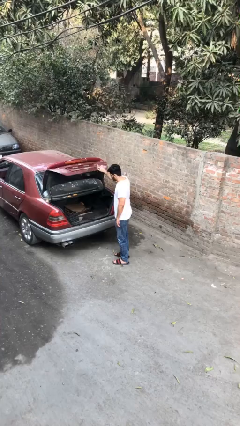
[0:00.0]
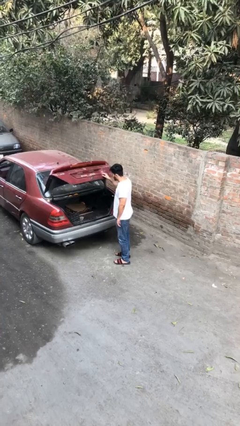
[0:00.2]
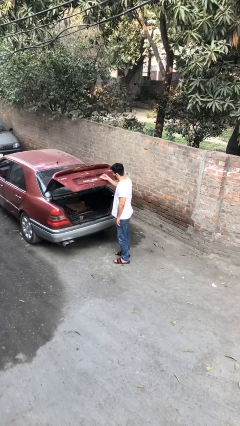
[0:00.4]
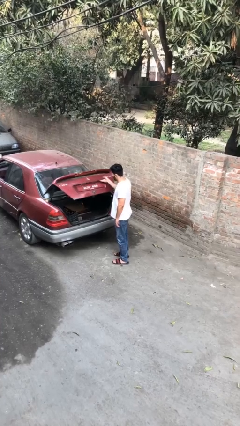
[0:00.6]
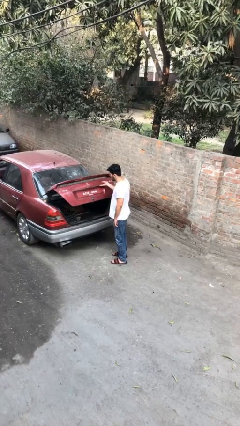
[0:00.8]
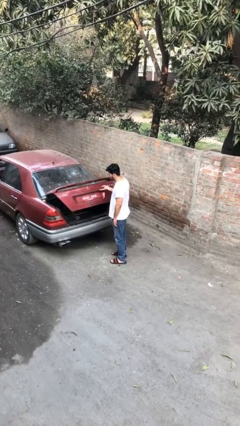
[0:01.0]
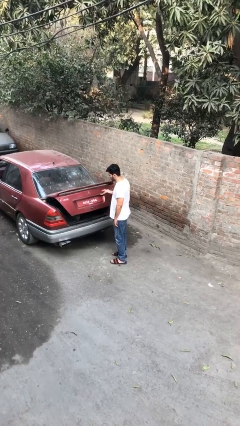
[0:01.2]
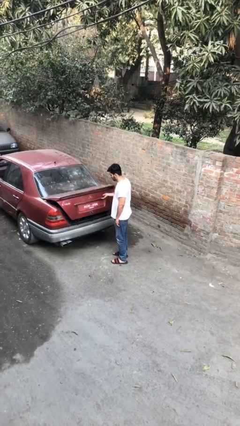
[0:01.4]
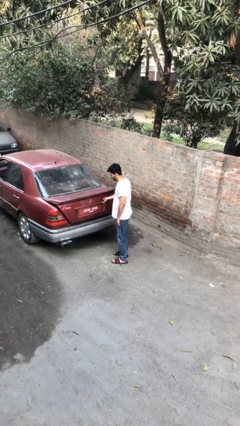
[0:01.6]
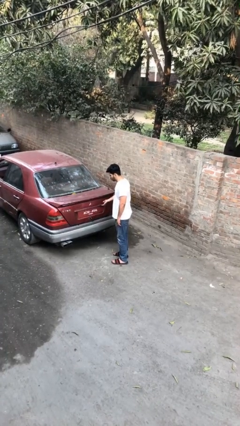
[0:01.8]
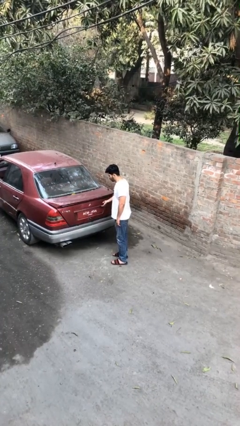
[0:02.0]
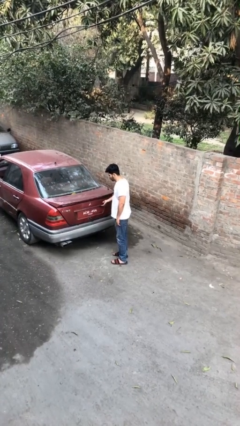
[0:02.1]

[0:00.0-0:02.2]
person closes car trunk

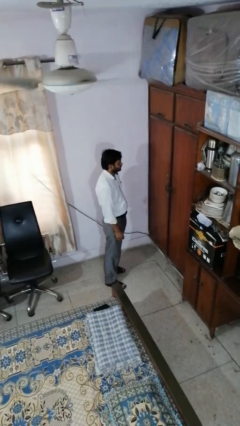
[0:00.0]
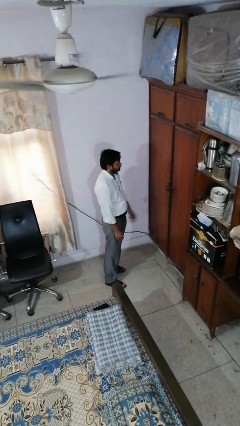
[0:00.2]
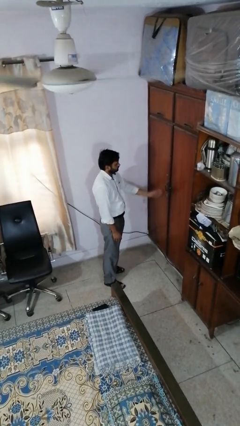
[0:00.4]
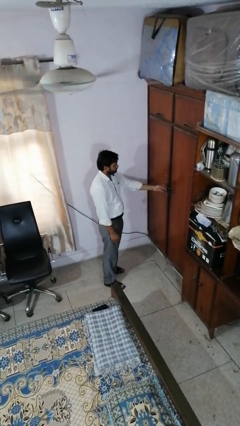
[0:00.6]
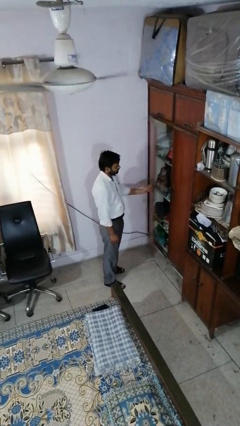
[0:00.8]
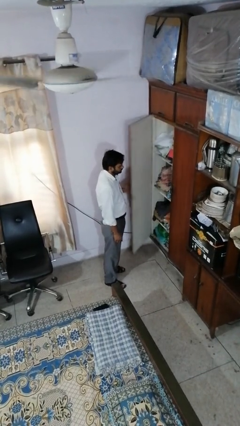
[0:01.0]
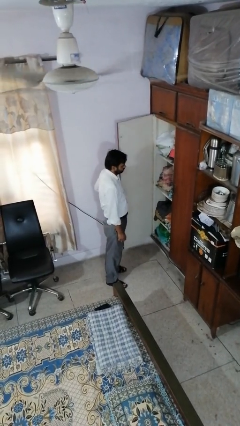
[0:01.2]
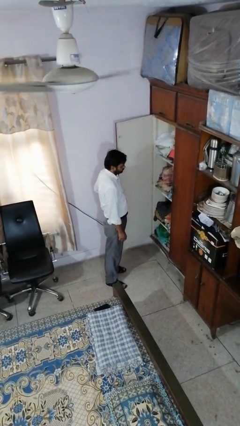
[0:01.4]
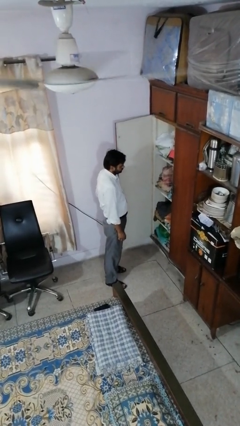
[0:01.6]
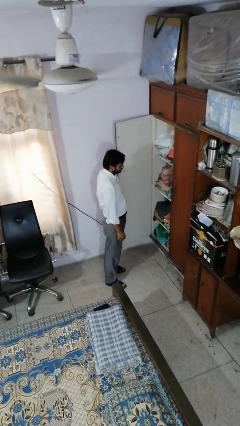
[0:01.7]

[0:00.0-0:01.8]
person opens closet door

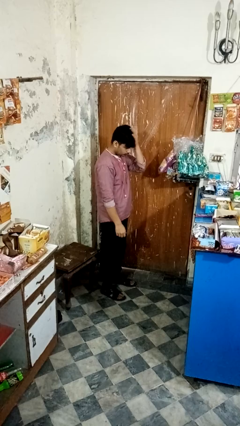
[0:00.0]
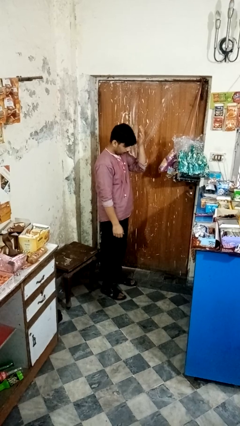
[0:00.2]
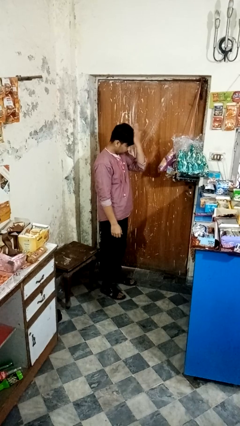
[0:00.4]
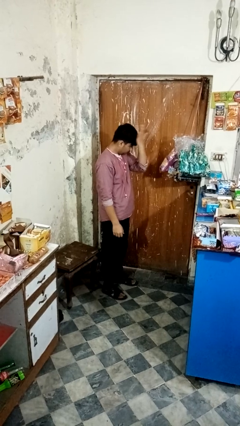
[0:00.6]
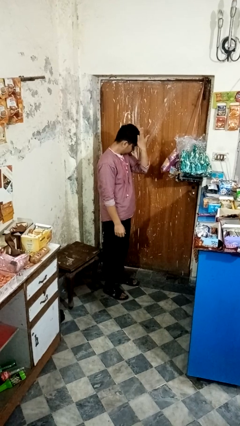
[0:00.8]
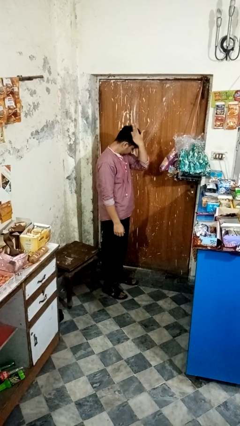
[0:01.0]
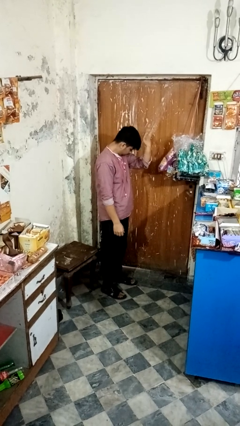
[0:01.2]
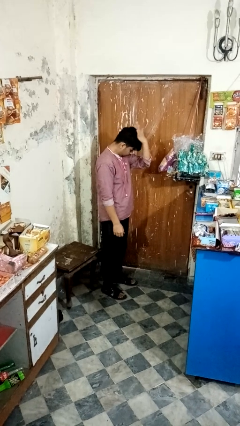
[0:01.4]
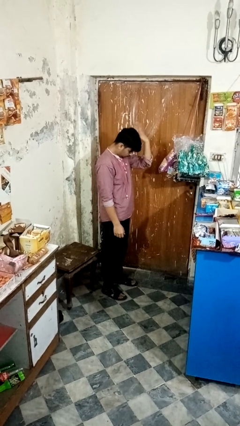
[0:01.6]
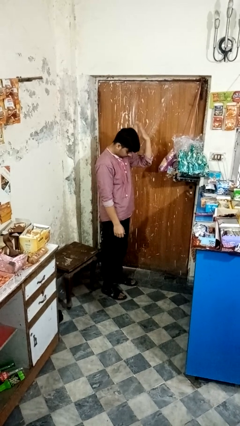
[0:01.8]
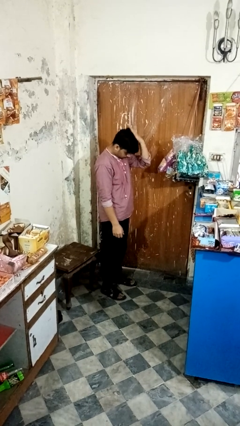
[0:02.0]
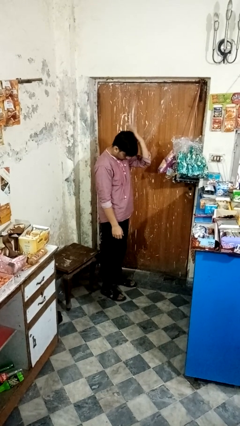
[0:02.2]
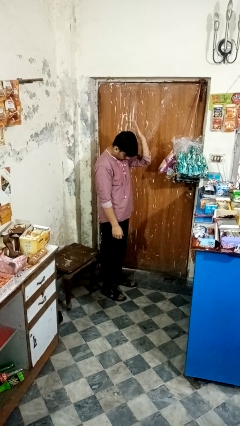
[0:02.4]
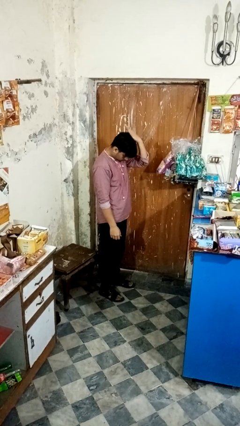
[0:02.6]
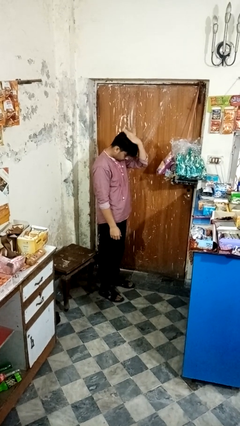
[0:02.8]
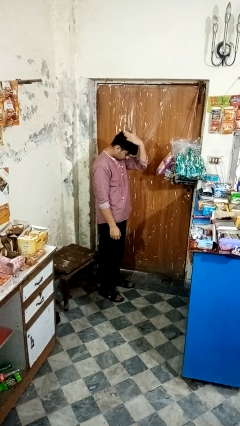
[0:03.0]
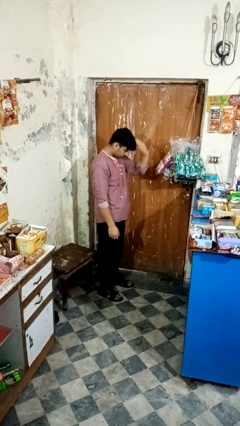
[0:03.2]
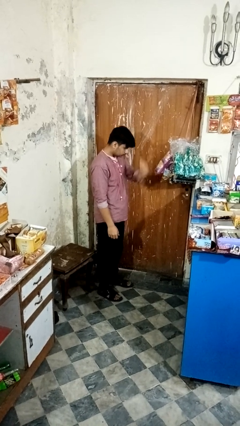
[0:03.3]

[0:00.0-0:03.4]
person pats head

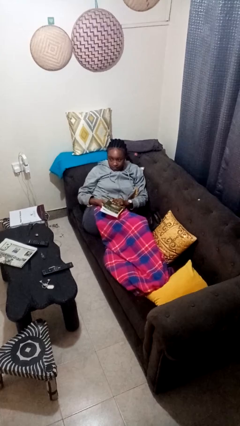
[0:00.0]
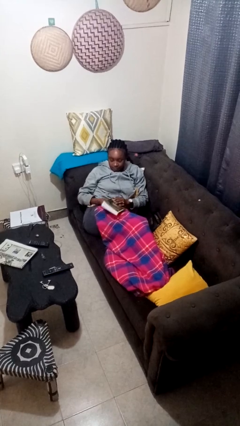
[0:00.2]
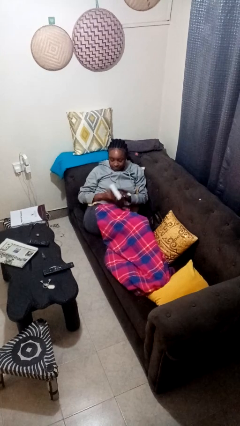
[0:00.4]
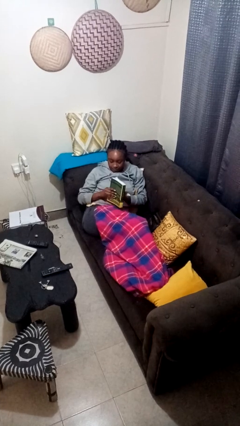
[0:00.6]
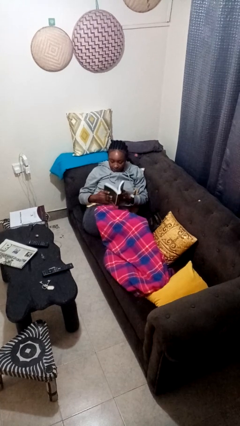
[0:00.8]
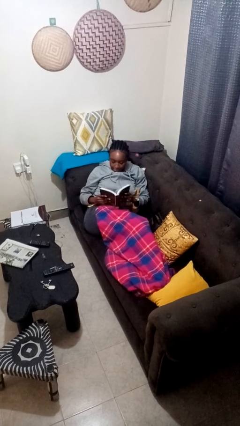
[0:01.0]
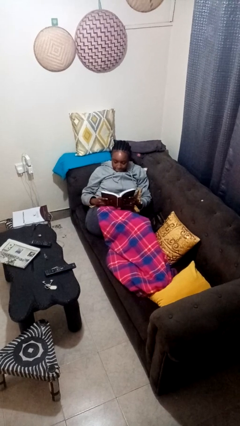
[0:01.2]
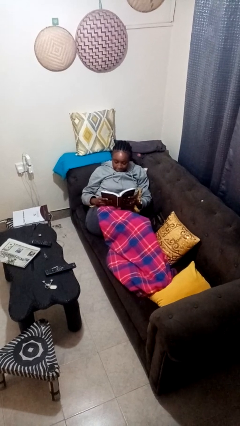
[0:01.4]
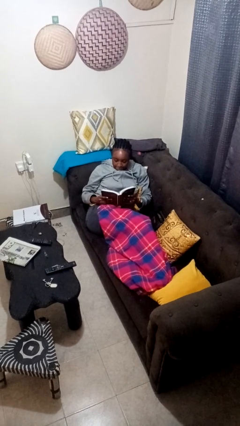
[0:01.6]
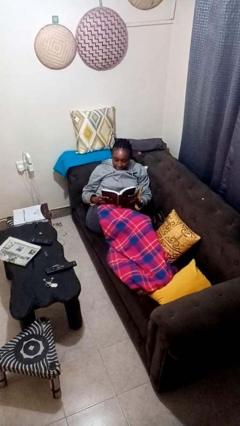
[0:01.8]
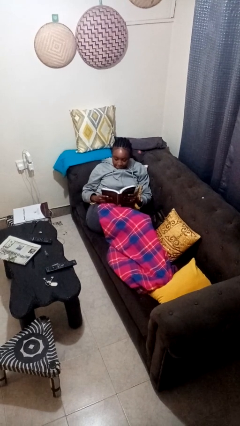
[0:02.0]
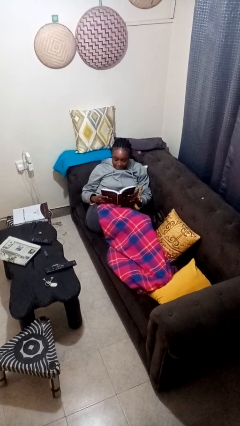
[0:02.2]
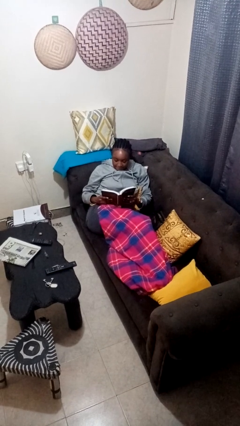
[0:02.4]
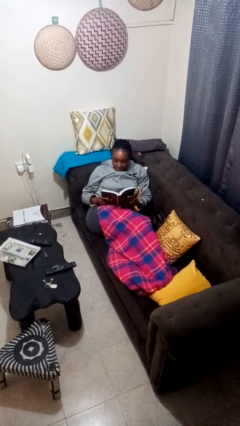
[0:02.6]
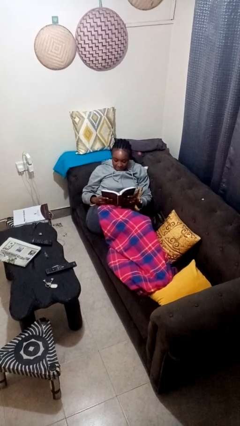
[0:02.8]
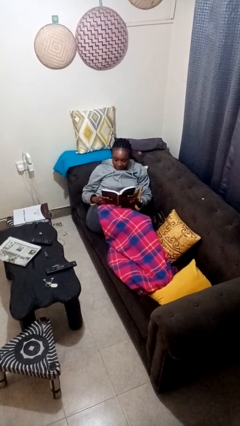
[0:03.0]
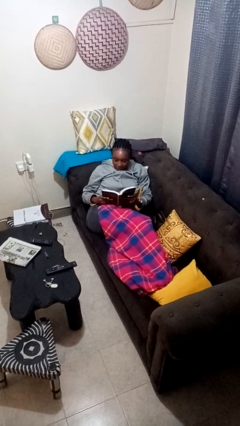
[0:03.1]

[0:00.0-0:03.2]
person reads book

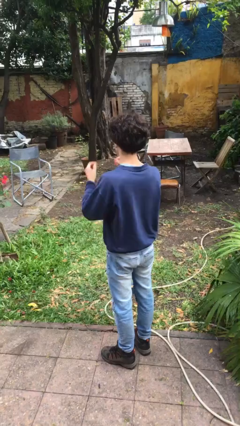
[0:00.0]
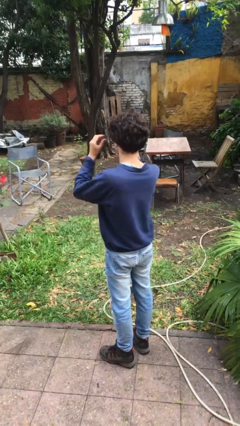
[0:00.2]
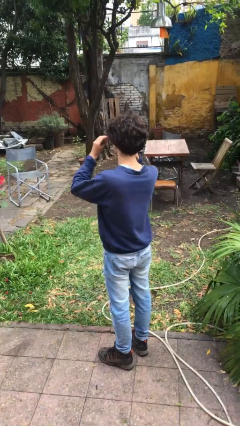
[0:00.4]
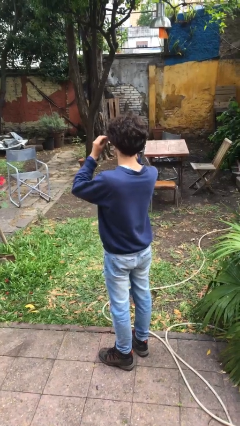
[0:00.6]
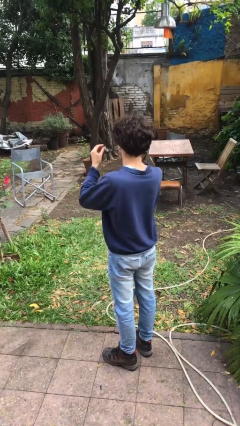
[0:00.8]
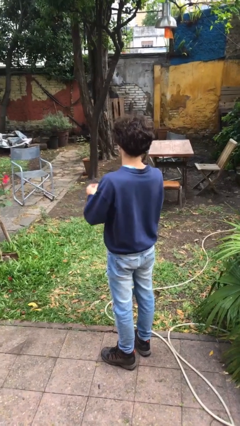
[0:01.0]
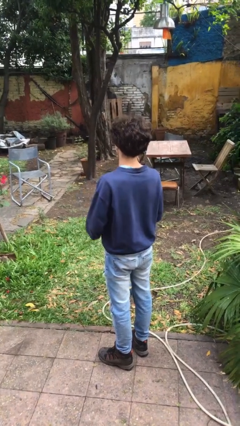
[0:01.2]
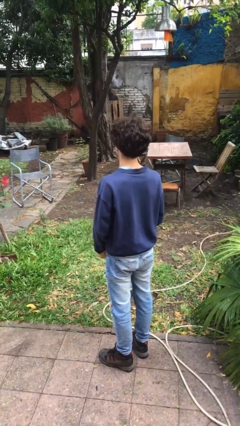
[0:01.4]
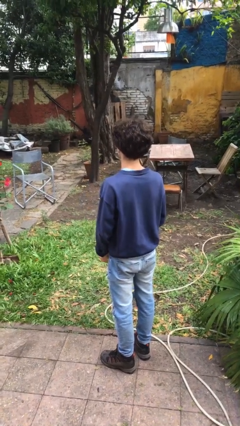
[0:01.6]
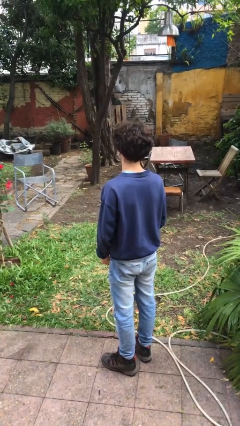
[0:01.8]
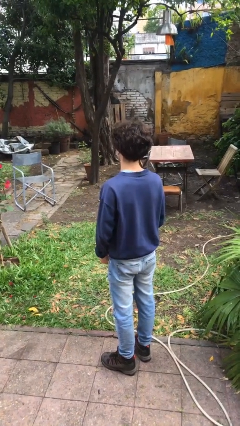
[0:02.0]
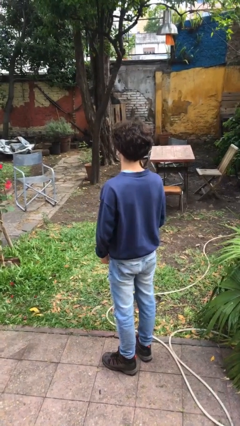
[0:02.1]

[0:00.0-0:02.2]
person takes off glasses

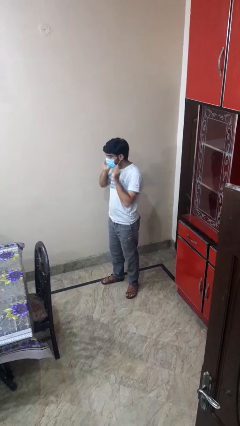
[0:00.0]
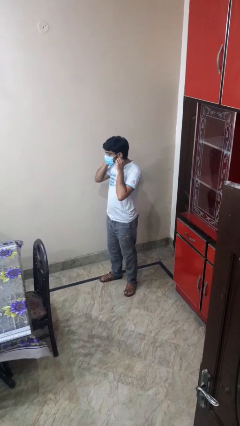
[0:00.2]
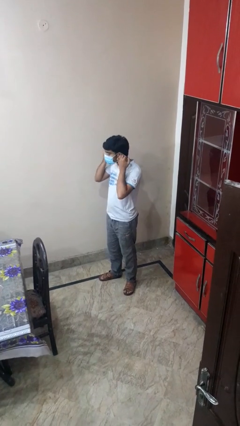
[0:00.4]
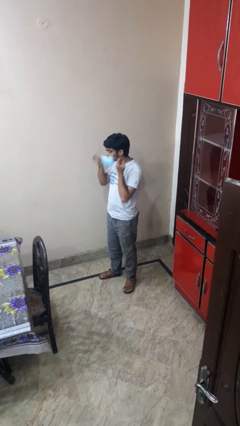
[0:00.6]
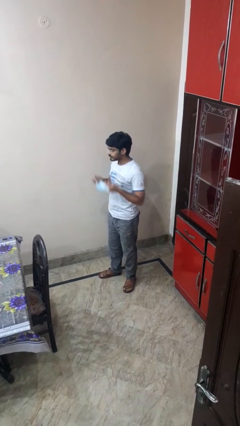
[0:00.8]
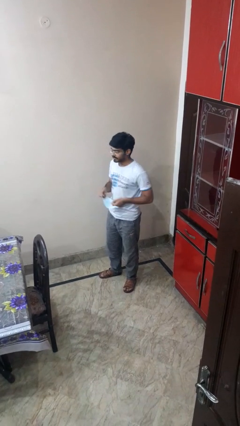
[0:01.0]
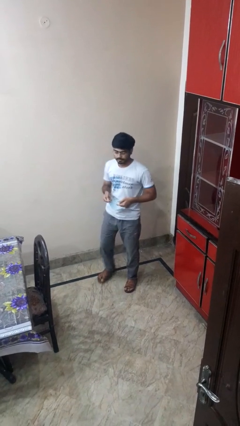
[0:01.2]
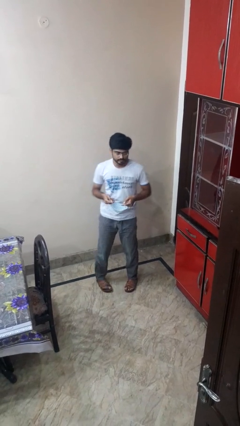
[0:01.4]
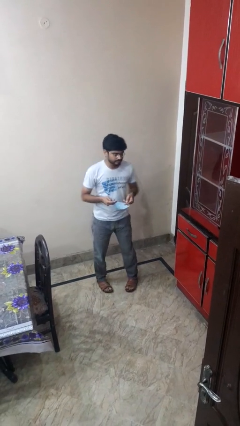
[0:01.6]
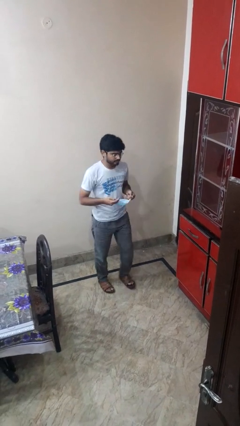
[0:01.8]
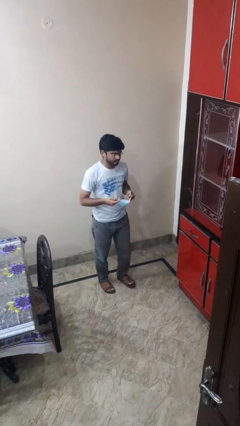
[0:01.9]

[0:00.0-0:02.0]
person takes off facemask

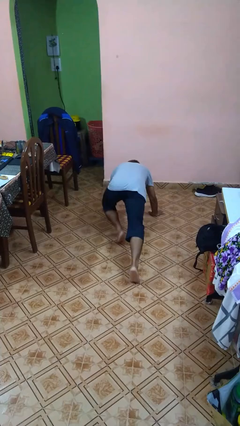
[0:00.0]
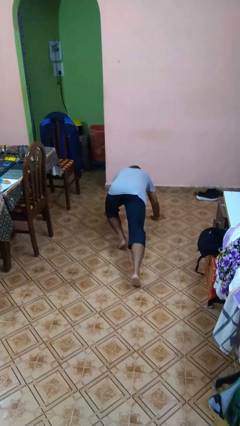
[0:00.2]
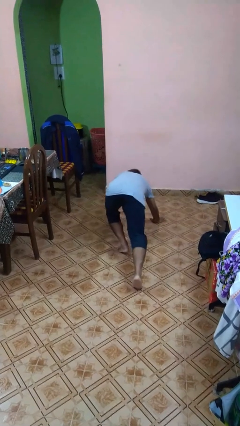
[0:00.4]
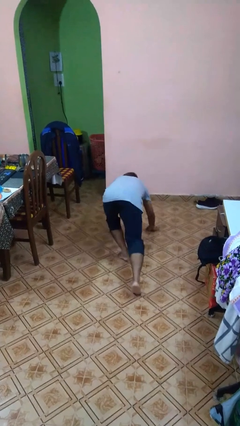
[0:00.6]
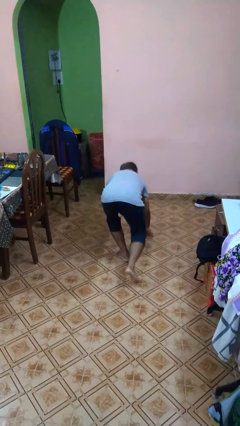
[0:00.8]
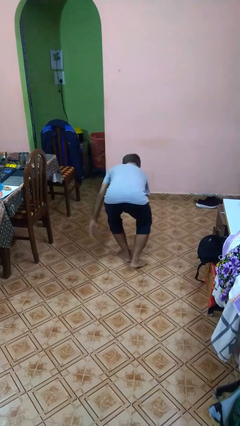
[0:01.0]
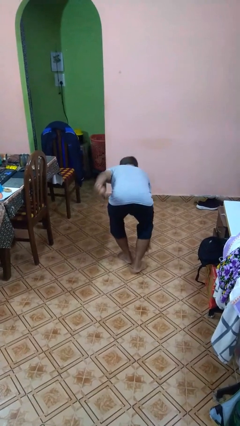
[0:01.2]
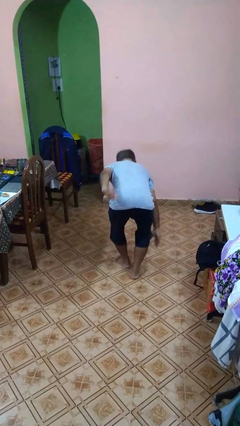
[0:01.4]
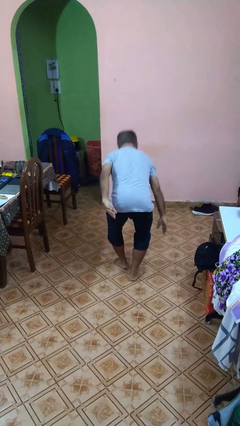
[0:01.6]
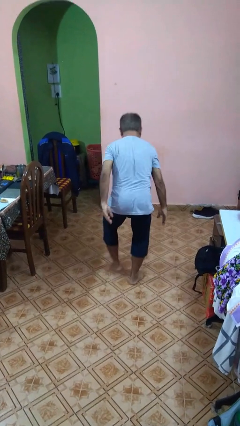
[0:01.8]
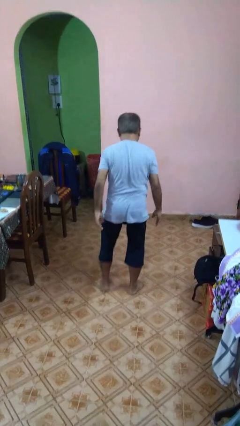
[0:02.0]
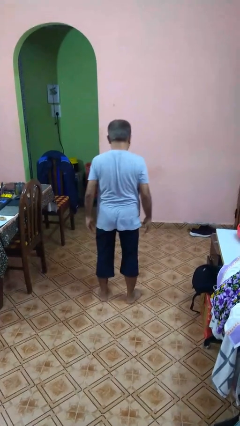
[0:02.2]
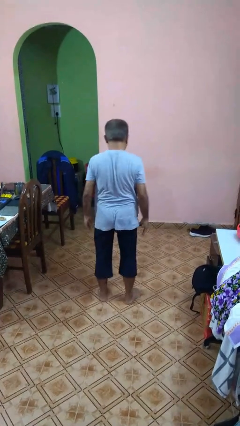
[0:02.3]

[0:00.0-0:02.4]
person stands up from floor
